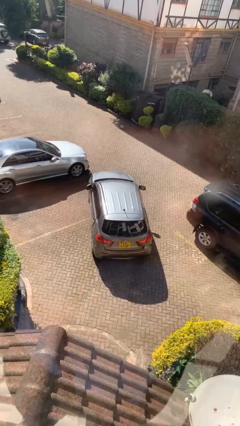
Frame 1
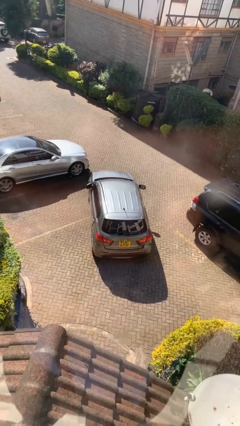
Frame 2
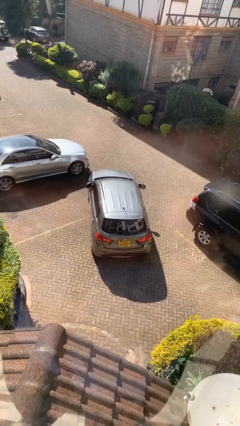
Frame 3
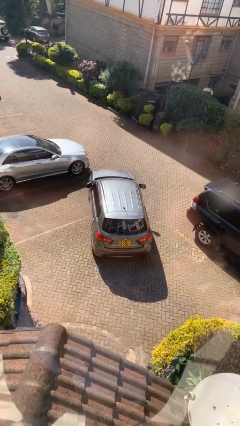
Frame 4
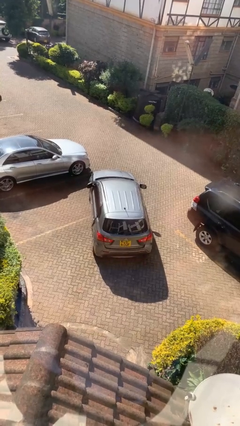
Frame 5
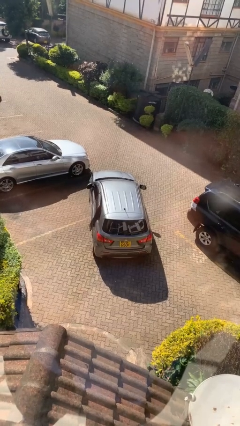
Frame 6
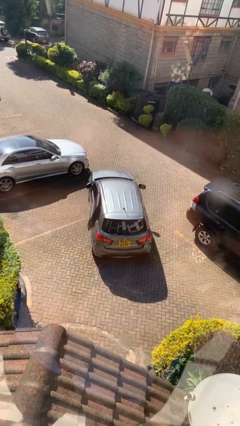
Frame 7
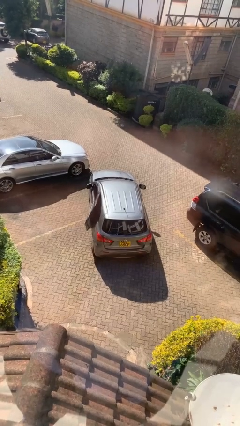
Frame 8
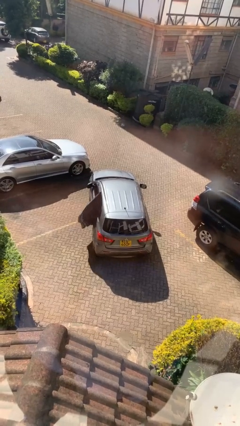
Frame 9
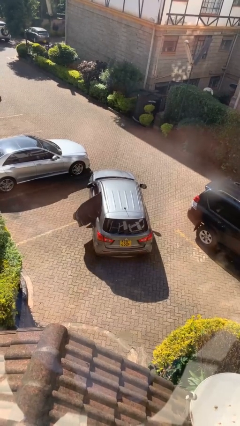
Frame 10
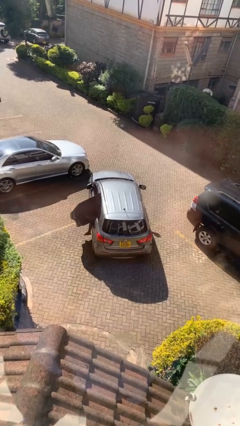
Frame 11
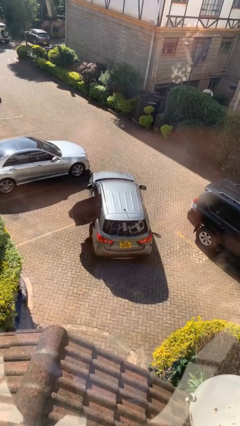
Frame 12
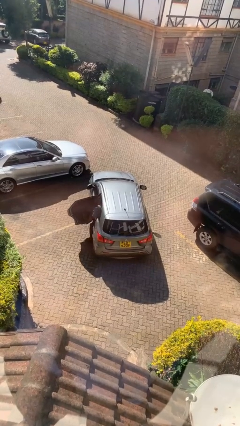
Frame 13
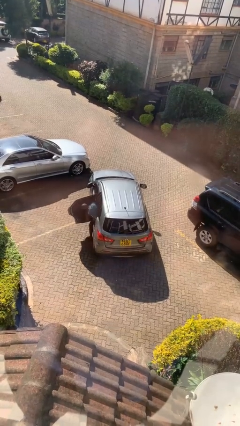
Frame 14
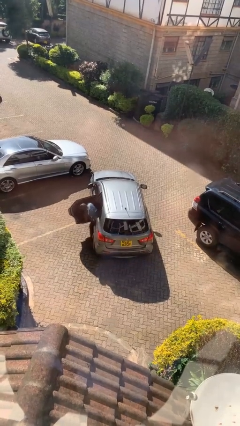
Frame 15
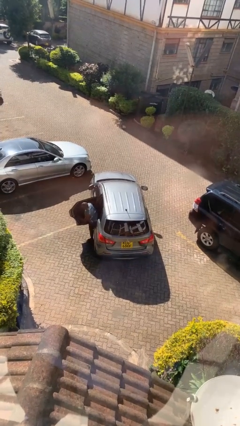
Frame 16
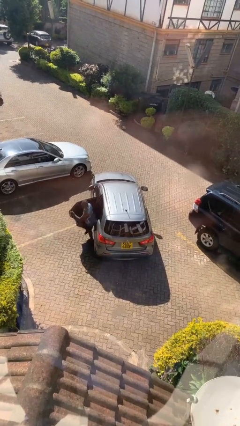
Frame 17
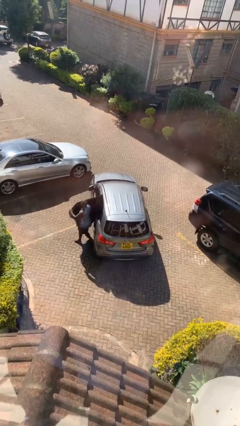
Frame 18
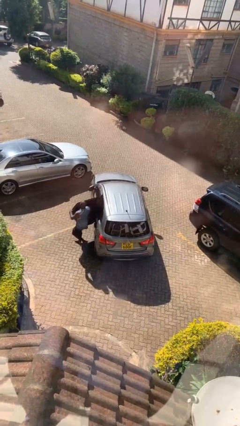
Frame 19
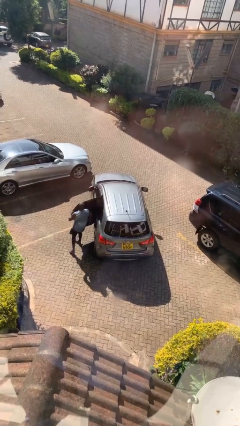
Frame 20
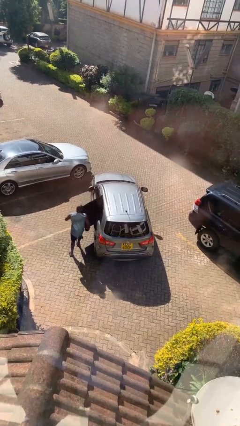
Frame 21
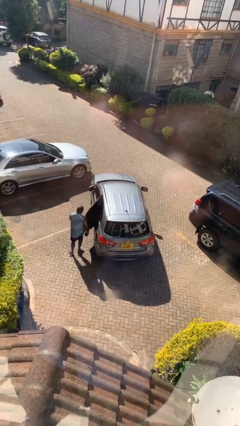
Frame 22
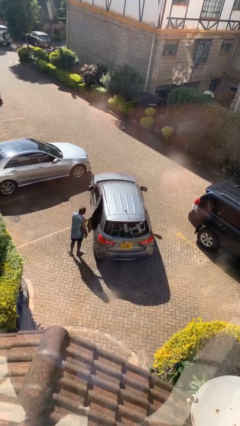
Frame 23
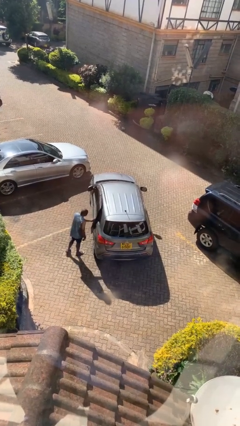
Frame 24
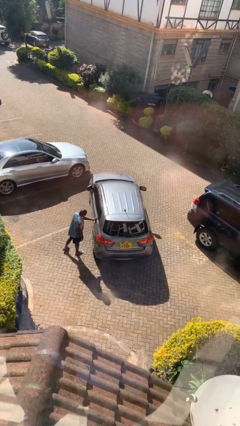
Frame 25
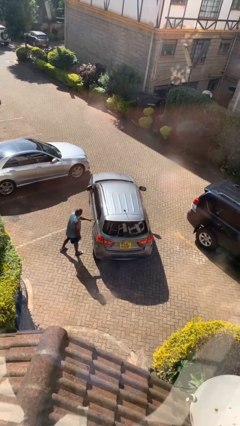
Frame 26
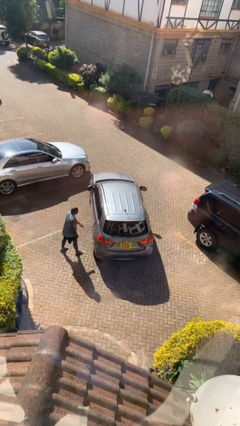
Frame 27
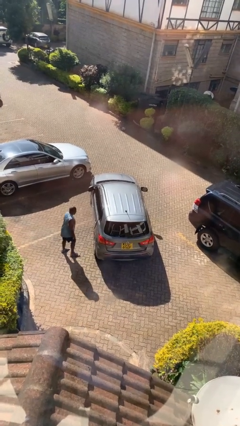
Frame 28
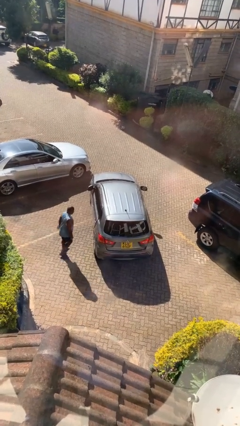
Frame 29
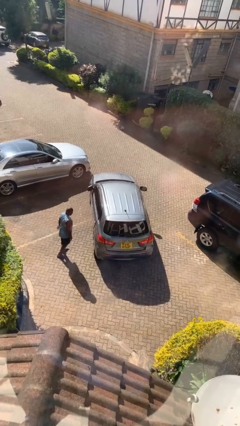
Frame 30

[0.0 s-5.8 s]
car drops off person

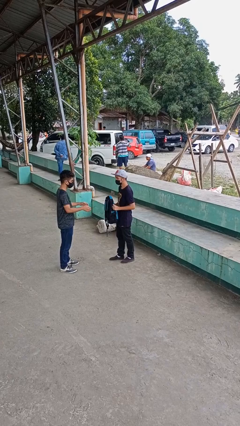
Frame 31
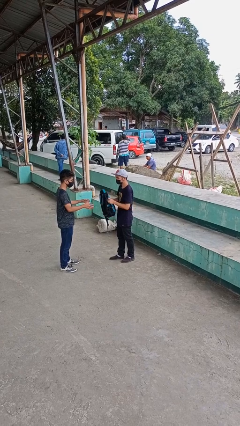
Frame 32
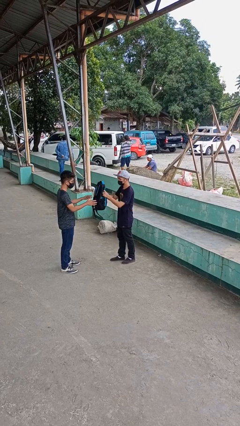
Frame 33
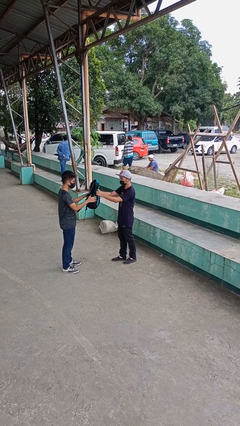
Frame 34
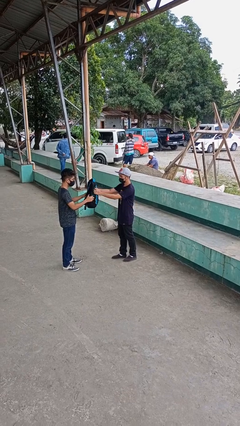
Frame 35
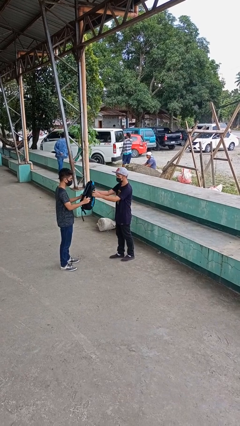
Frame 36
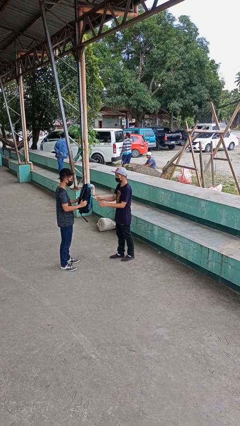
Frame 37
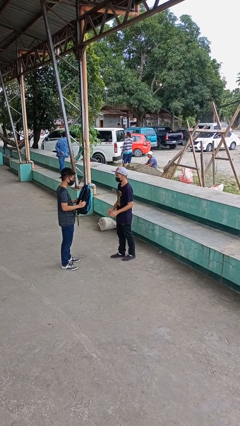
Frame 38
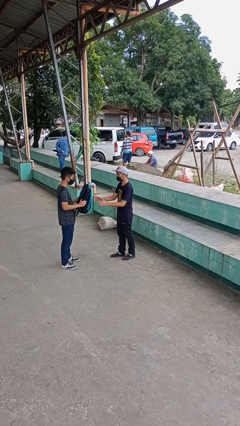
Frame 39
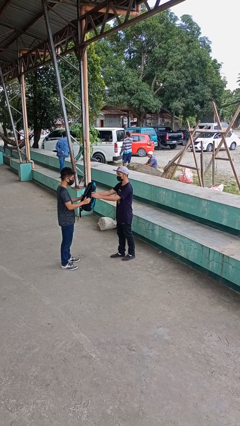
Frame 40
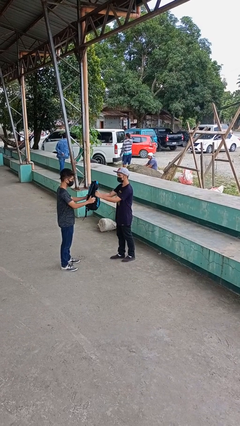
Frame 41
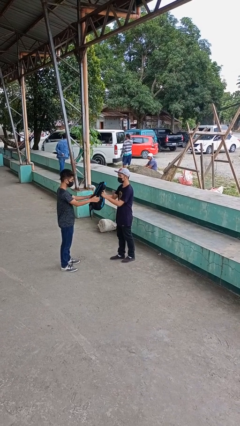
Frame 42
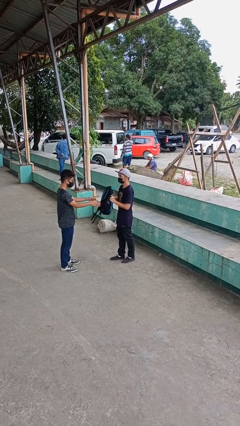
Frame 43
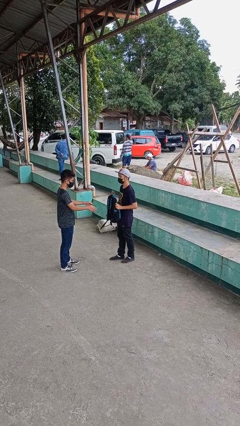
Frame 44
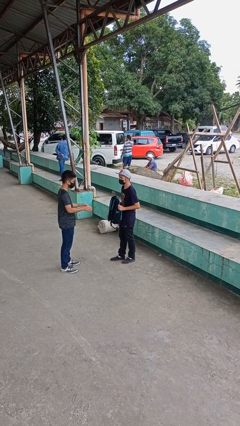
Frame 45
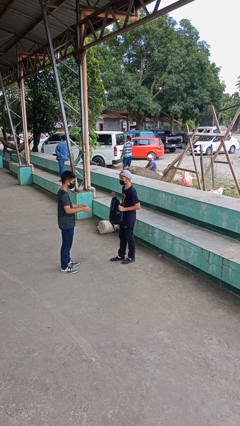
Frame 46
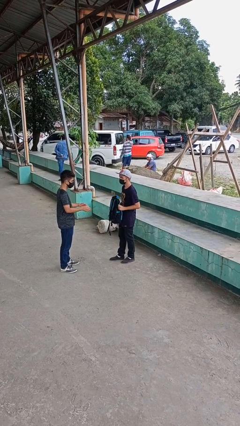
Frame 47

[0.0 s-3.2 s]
person transfers object to person

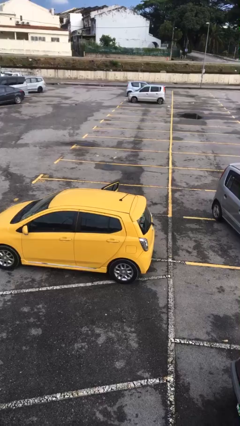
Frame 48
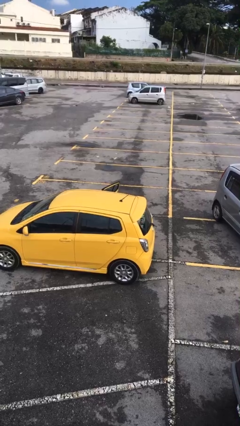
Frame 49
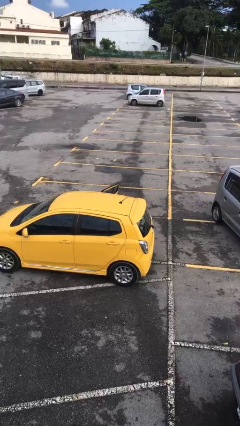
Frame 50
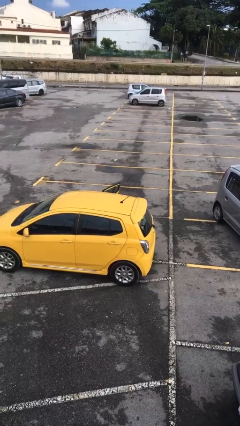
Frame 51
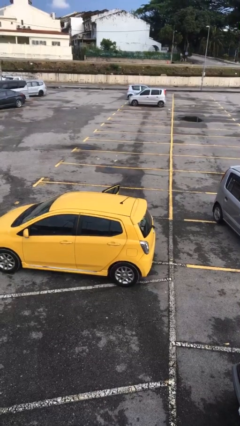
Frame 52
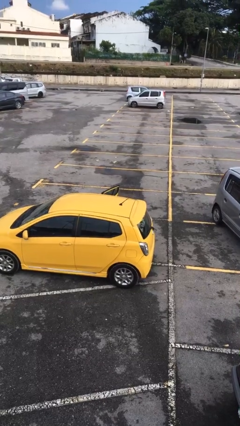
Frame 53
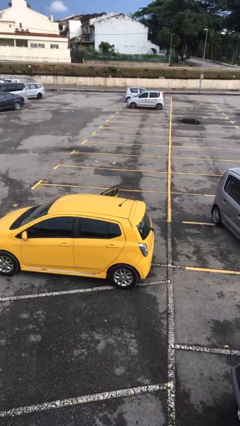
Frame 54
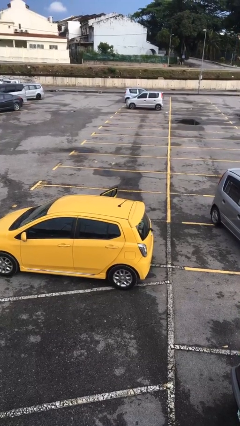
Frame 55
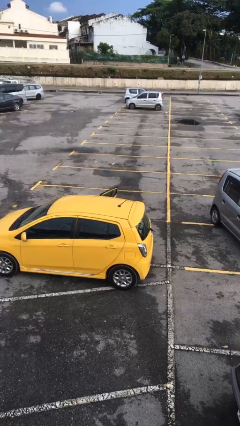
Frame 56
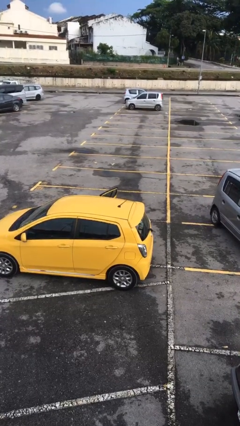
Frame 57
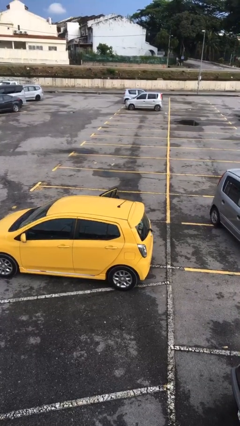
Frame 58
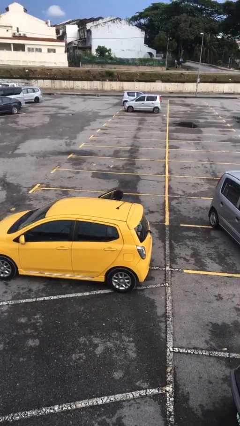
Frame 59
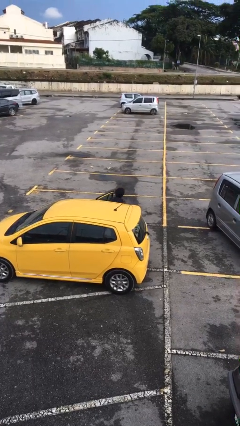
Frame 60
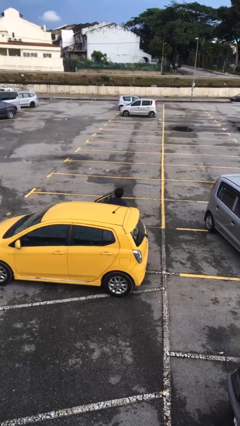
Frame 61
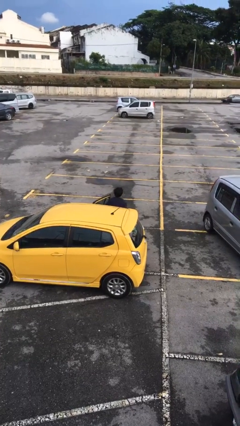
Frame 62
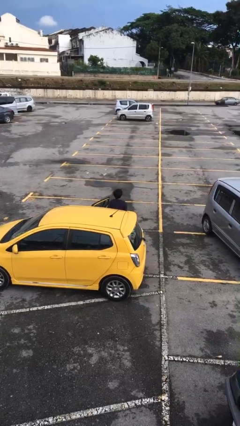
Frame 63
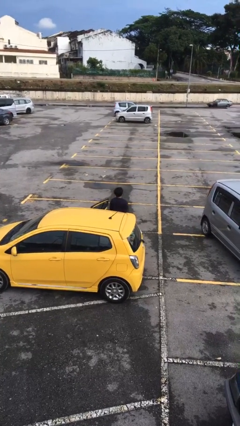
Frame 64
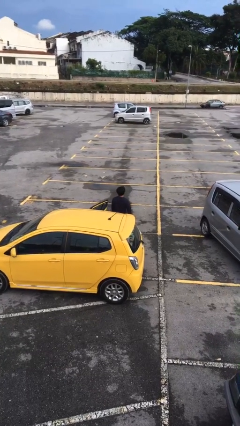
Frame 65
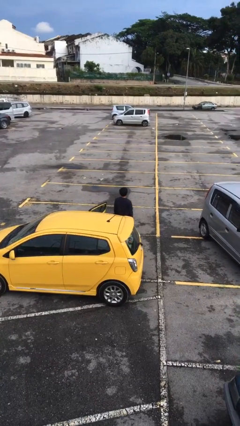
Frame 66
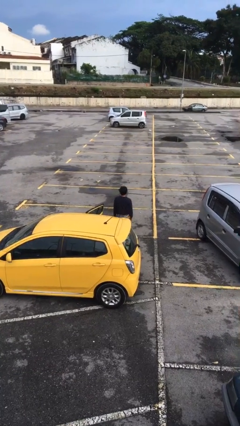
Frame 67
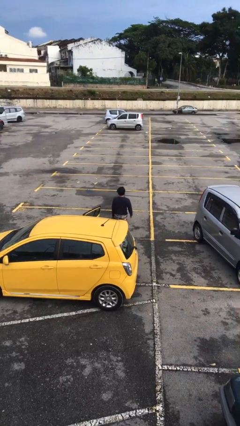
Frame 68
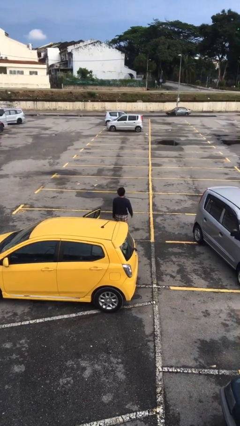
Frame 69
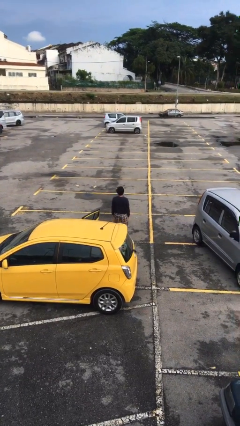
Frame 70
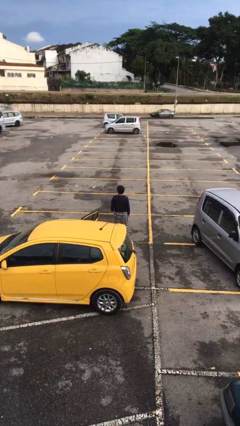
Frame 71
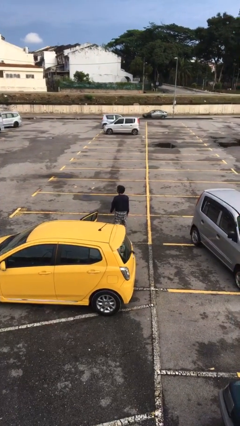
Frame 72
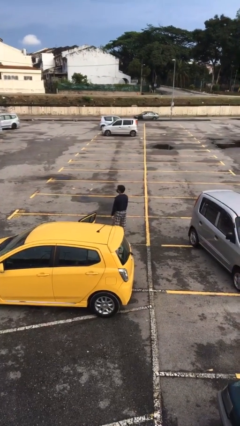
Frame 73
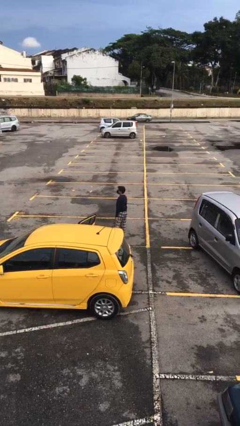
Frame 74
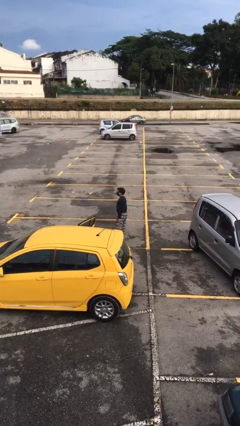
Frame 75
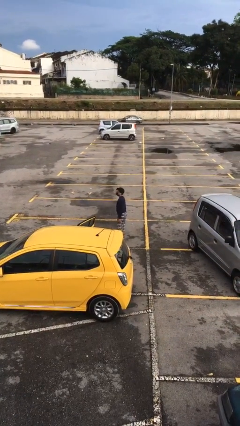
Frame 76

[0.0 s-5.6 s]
person exits car

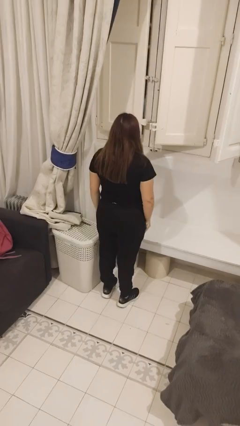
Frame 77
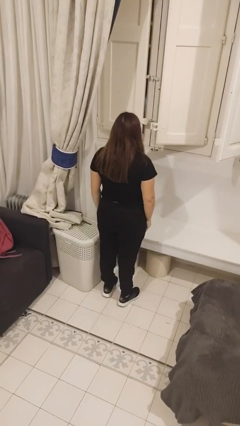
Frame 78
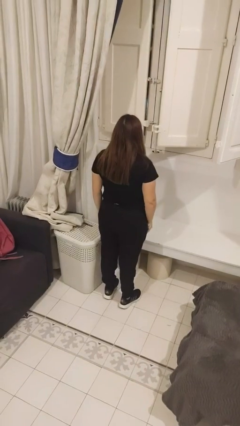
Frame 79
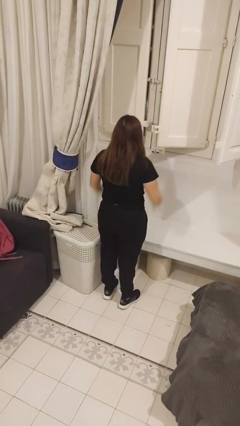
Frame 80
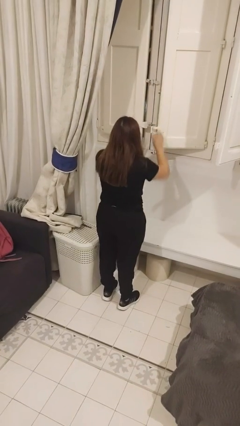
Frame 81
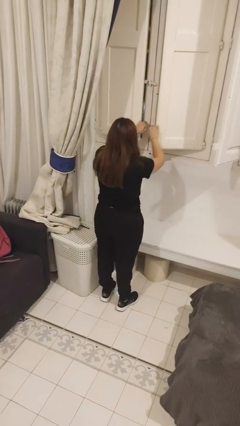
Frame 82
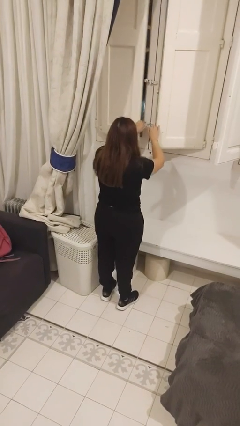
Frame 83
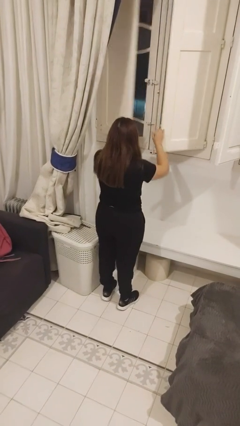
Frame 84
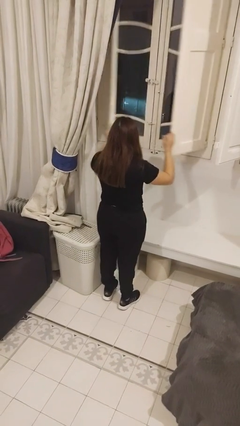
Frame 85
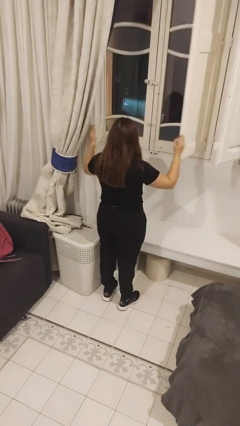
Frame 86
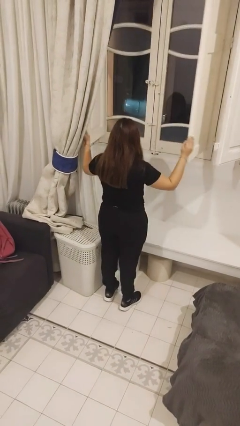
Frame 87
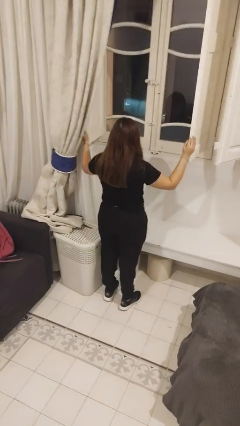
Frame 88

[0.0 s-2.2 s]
person opens home window

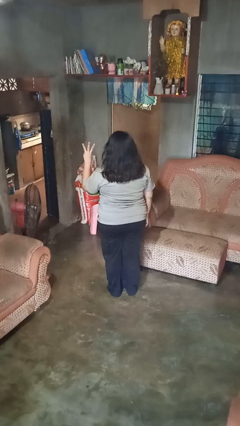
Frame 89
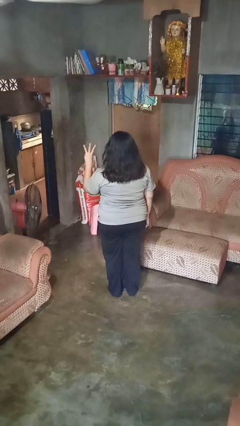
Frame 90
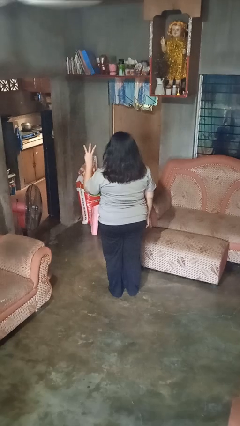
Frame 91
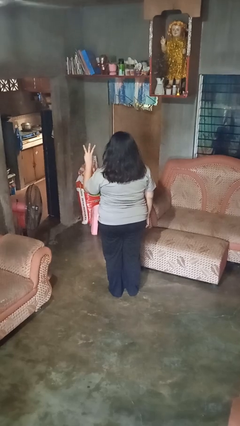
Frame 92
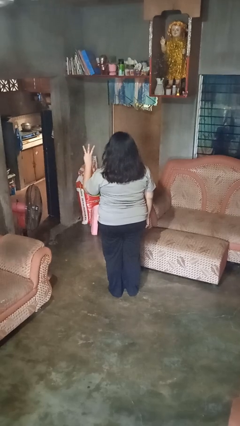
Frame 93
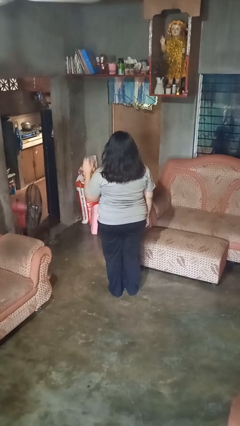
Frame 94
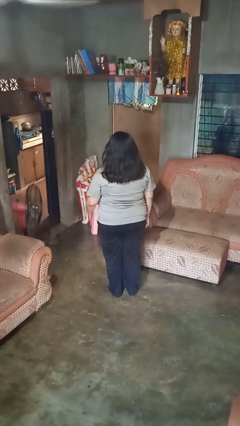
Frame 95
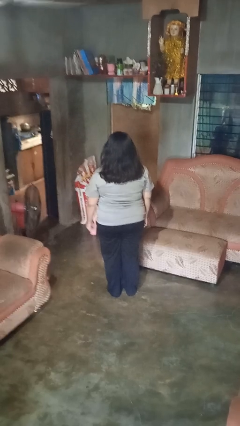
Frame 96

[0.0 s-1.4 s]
person gestures number three
